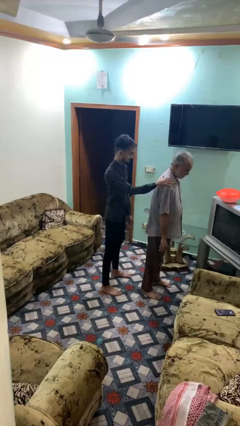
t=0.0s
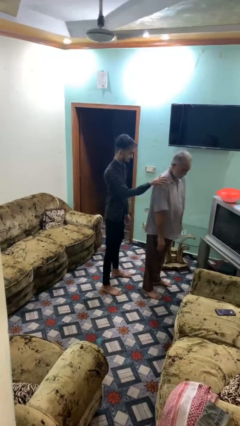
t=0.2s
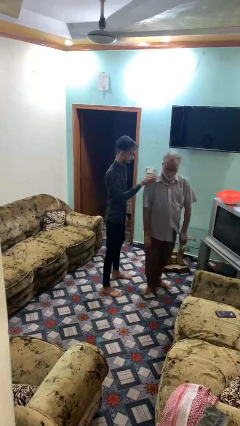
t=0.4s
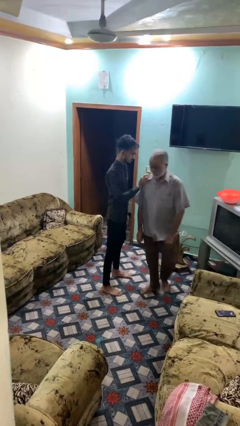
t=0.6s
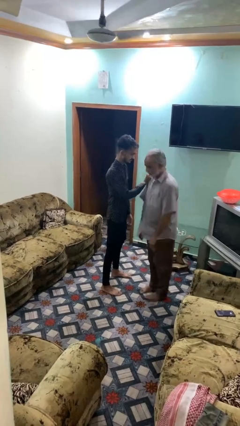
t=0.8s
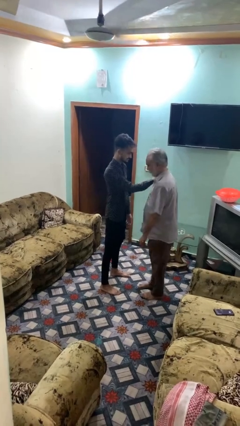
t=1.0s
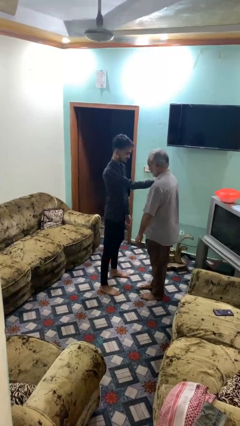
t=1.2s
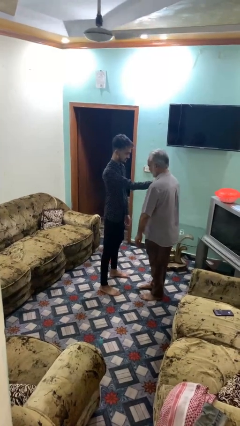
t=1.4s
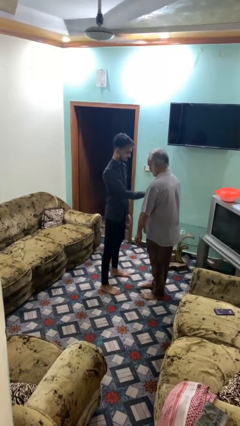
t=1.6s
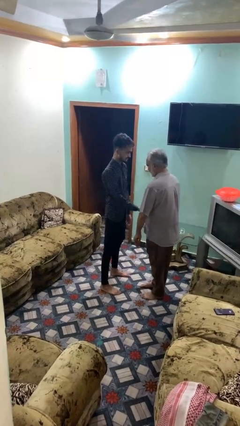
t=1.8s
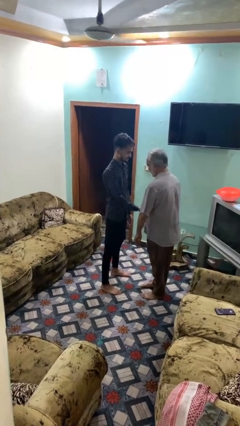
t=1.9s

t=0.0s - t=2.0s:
person spins person around

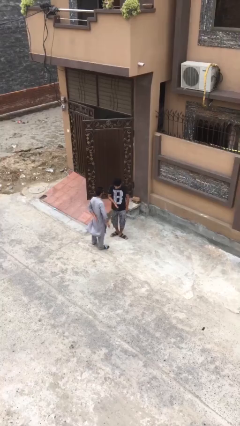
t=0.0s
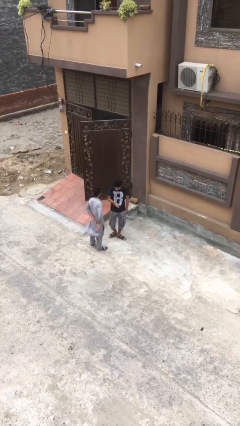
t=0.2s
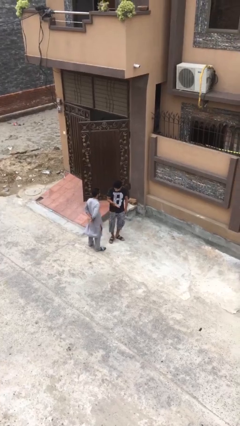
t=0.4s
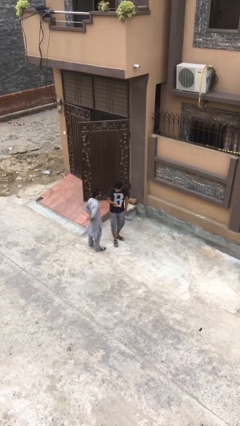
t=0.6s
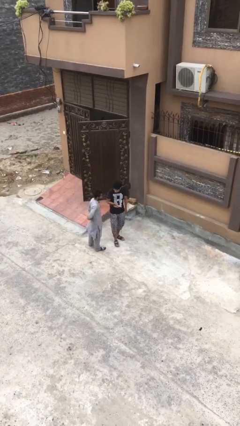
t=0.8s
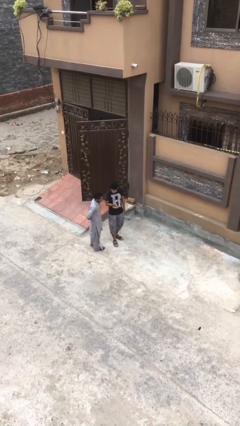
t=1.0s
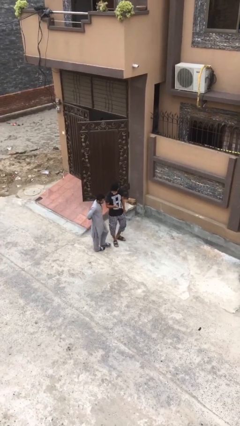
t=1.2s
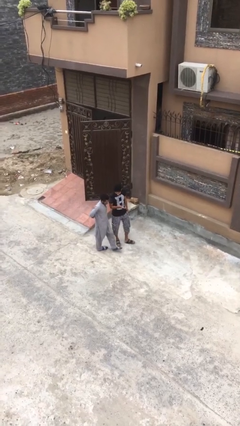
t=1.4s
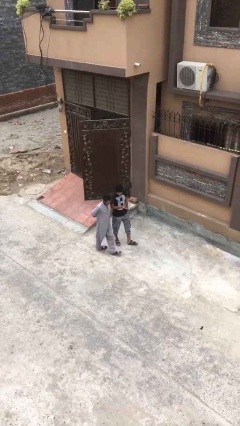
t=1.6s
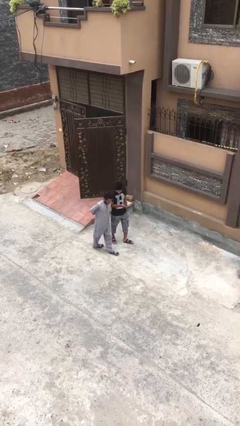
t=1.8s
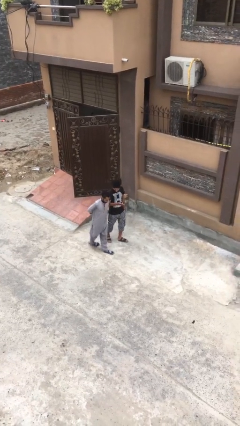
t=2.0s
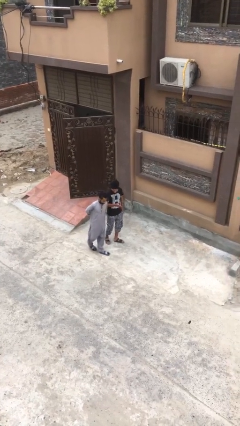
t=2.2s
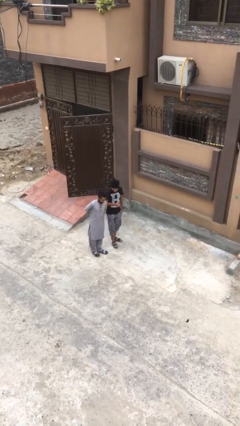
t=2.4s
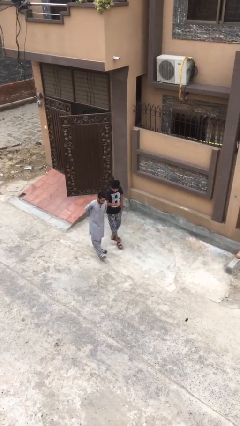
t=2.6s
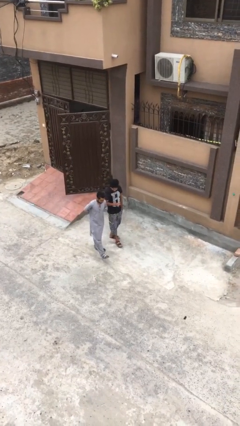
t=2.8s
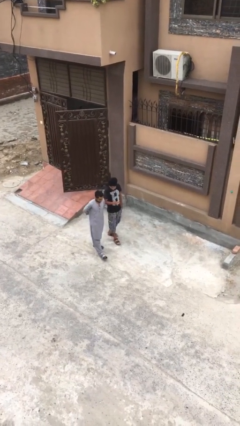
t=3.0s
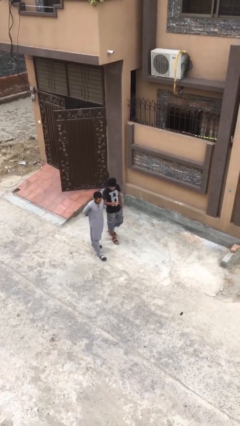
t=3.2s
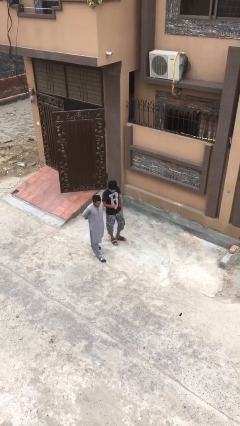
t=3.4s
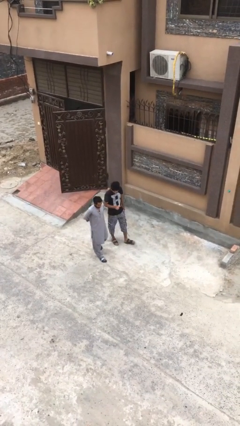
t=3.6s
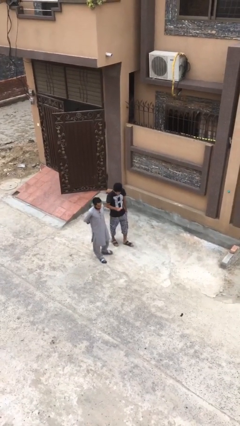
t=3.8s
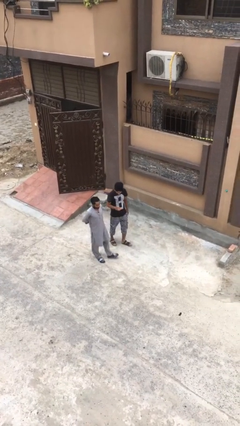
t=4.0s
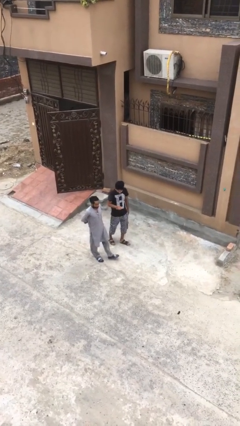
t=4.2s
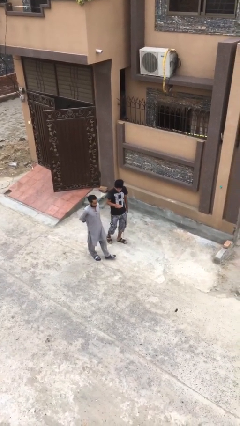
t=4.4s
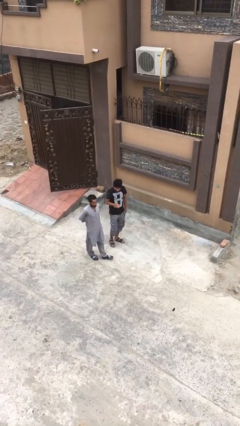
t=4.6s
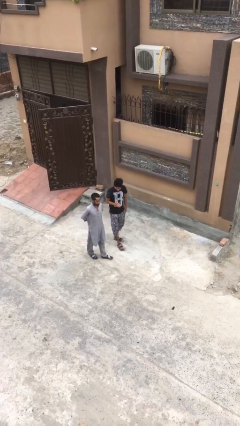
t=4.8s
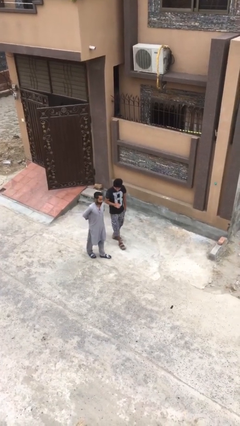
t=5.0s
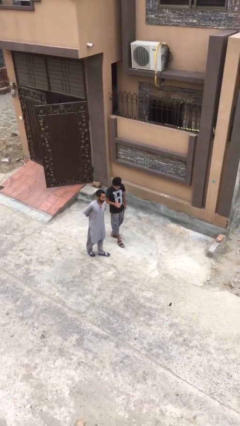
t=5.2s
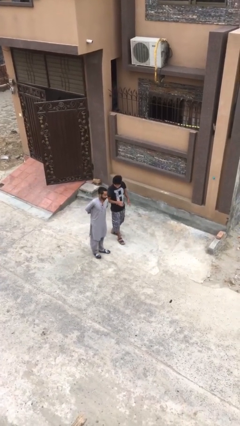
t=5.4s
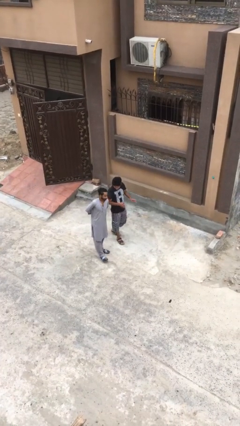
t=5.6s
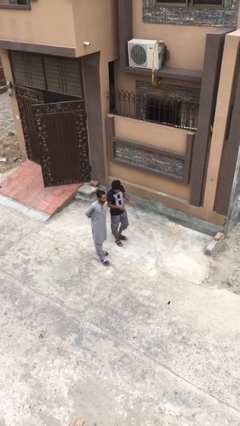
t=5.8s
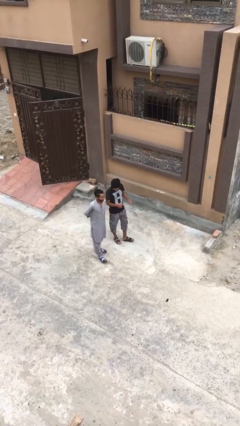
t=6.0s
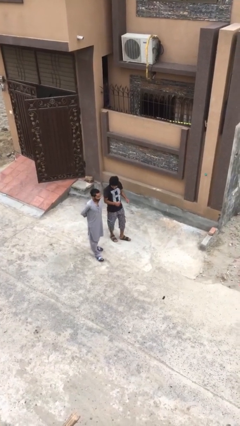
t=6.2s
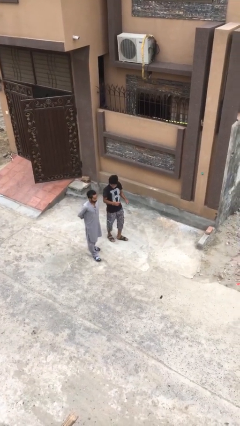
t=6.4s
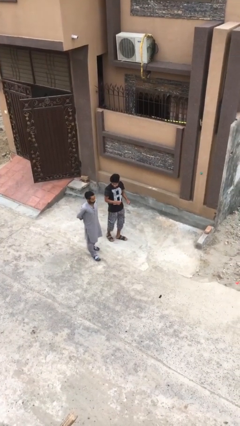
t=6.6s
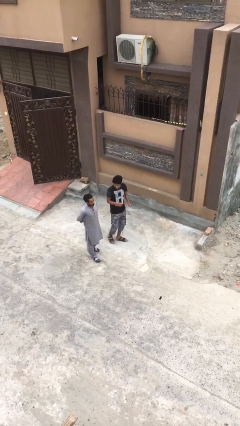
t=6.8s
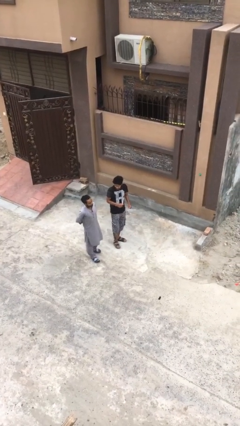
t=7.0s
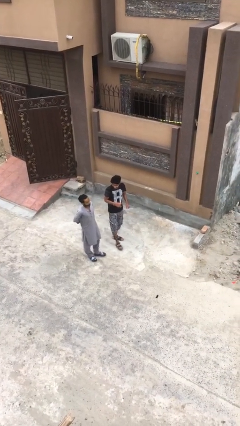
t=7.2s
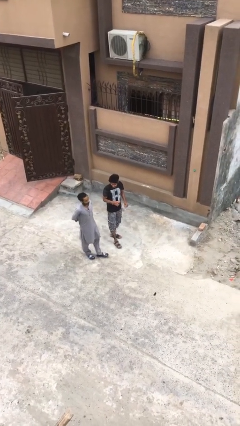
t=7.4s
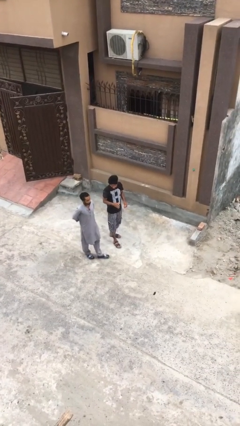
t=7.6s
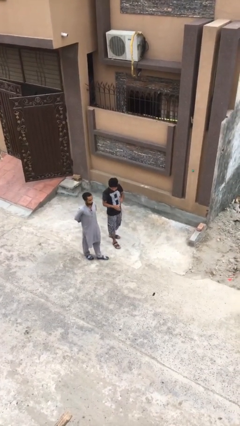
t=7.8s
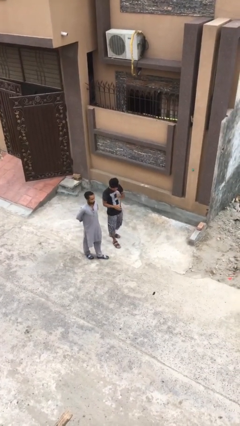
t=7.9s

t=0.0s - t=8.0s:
person talks to person

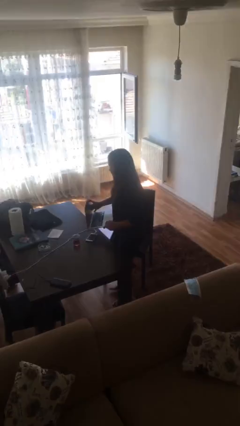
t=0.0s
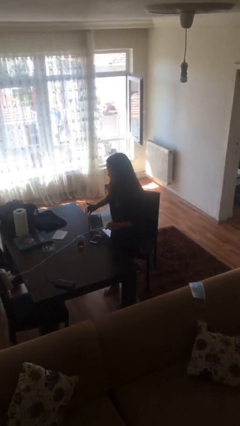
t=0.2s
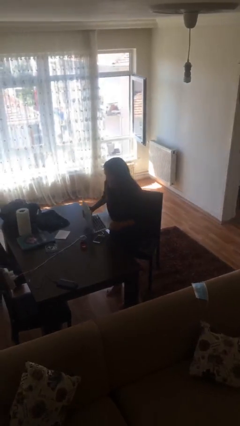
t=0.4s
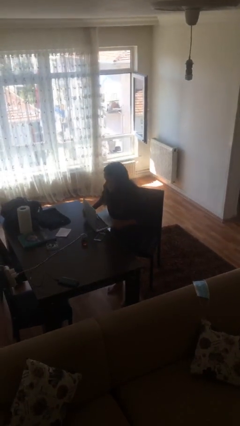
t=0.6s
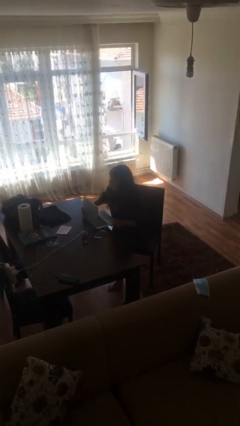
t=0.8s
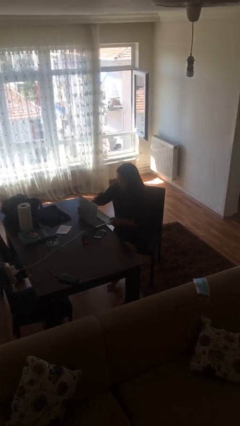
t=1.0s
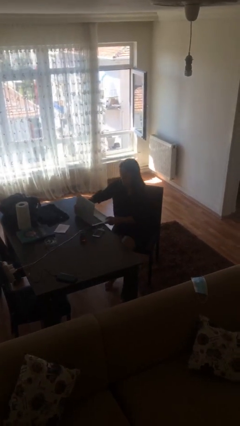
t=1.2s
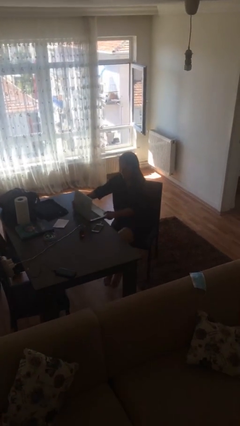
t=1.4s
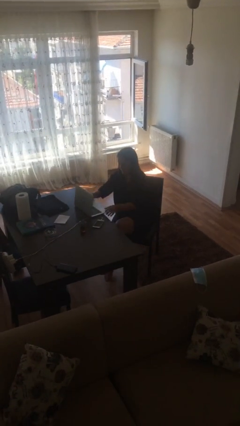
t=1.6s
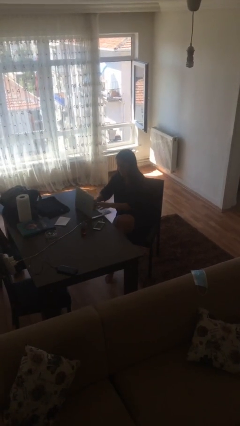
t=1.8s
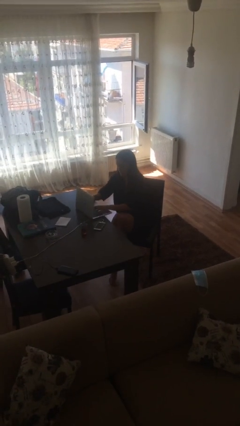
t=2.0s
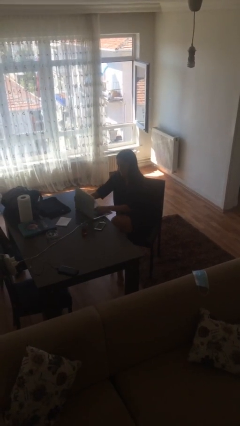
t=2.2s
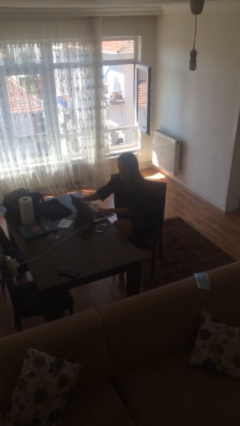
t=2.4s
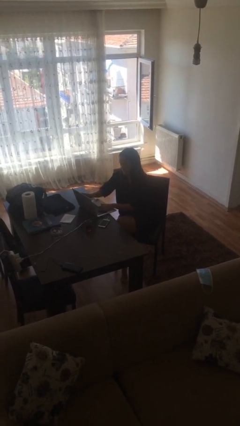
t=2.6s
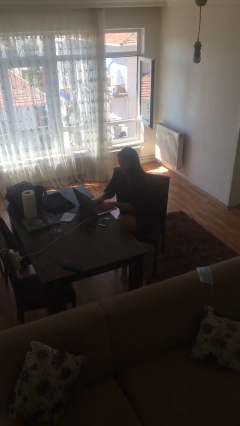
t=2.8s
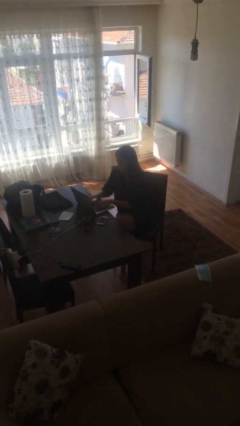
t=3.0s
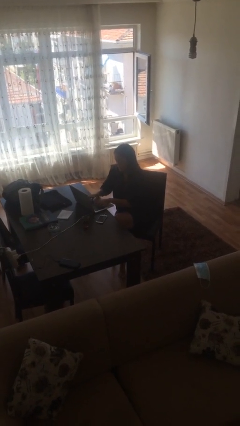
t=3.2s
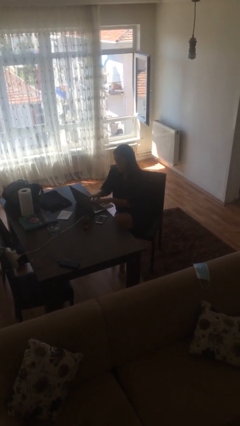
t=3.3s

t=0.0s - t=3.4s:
person sits down

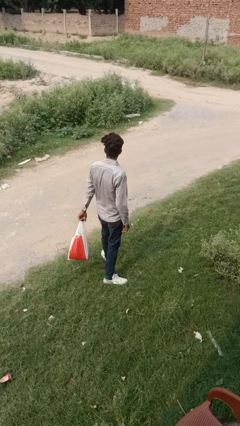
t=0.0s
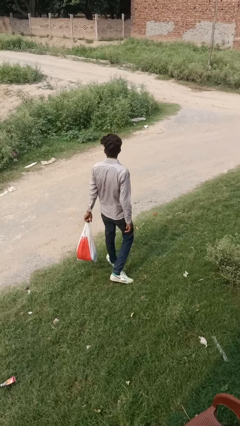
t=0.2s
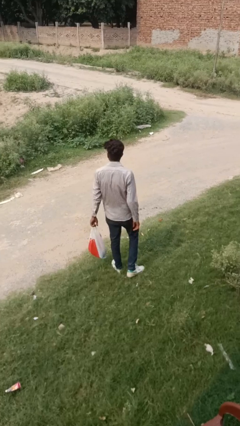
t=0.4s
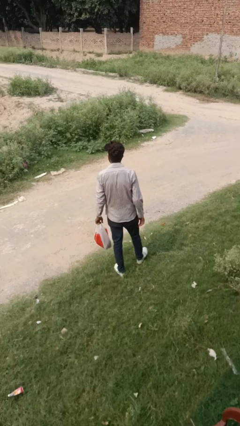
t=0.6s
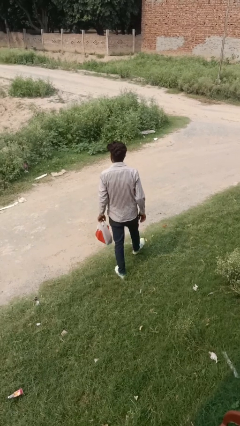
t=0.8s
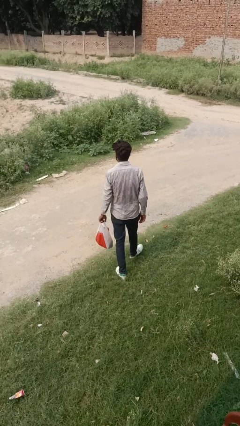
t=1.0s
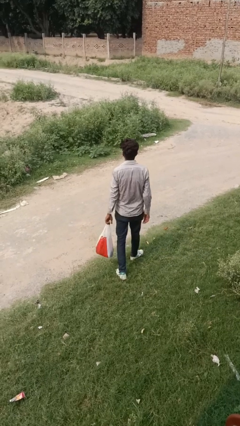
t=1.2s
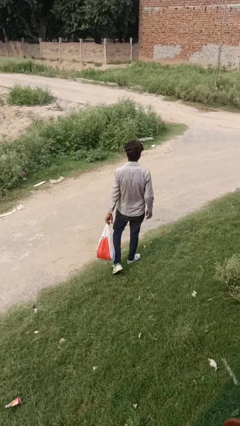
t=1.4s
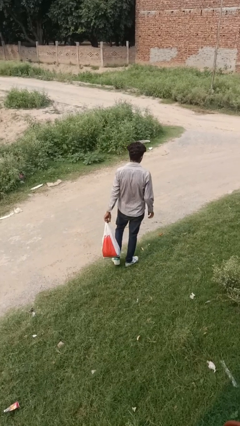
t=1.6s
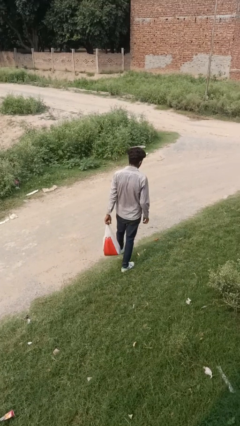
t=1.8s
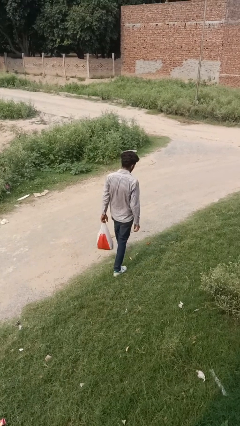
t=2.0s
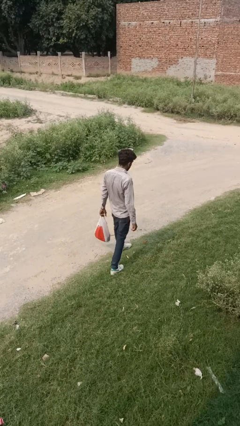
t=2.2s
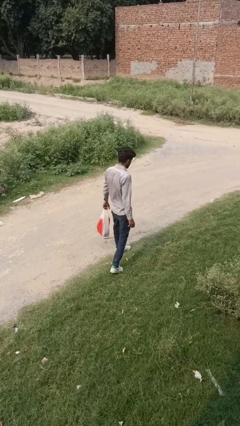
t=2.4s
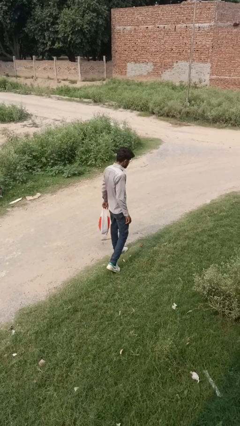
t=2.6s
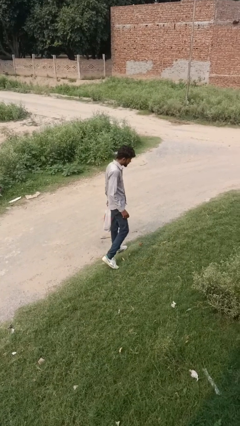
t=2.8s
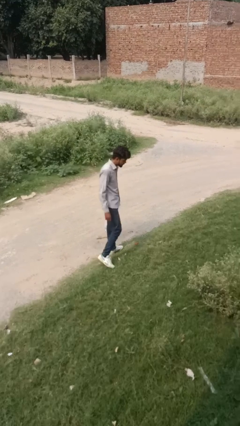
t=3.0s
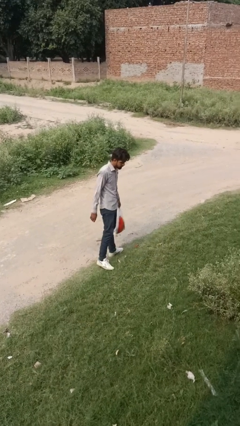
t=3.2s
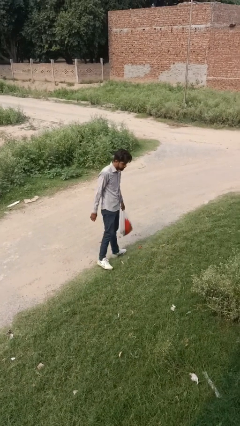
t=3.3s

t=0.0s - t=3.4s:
person carries groceries

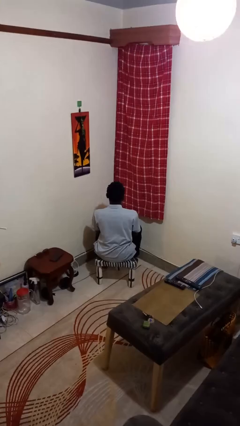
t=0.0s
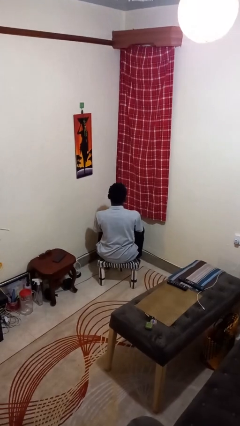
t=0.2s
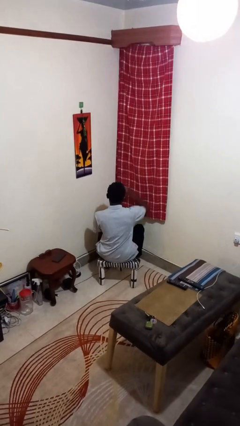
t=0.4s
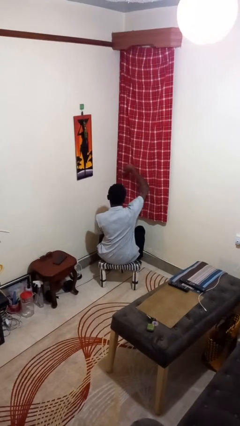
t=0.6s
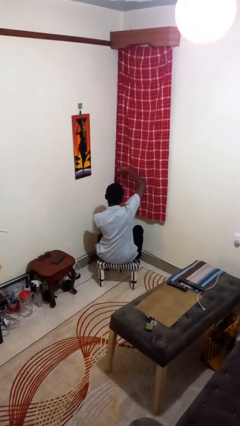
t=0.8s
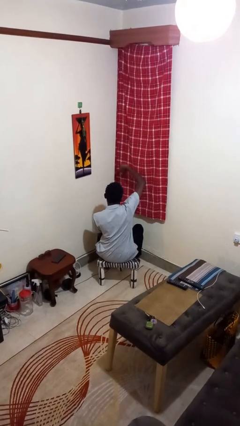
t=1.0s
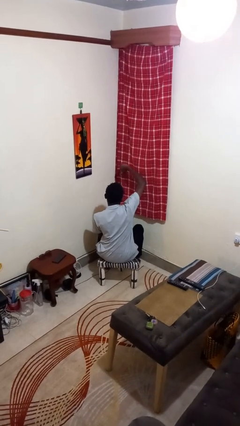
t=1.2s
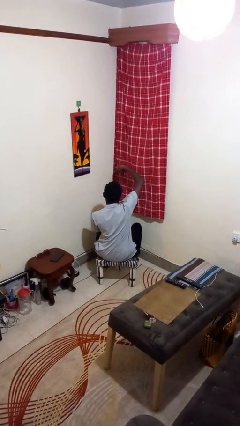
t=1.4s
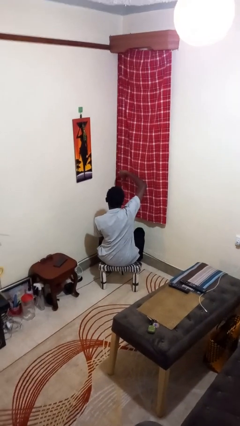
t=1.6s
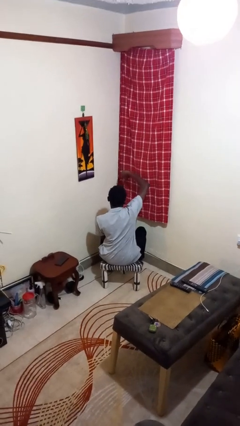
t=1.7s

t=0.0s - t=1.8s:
person gestures thumbs down
